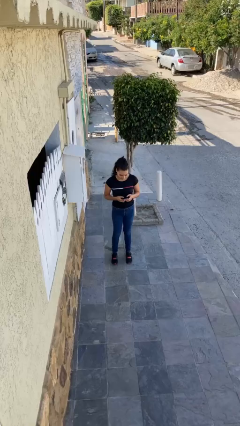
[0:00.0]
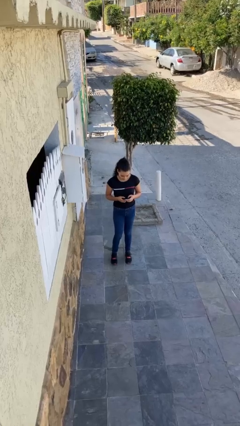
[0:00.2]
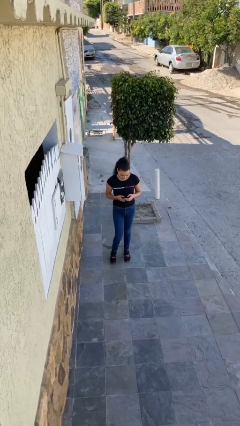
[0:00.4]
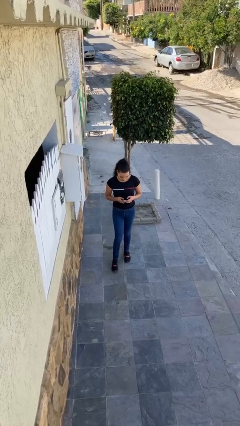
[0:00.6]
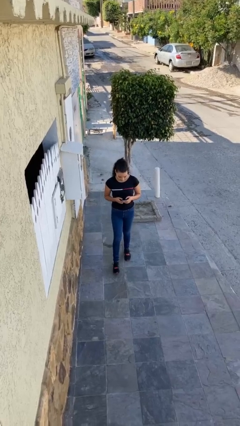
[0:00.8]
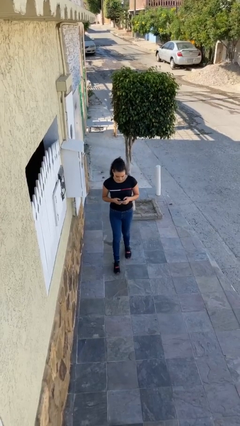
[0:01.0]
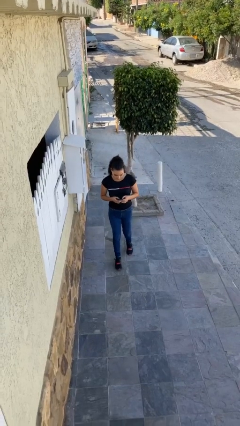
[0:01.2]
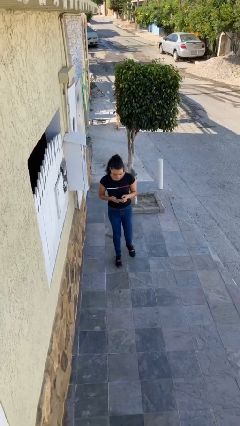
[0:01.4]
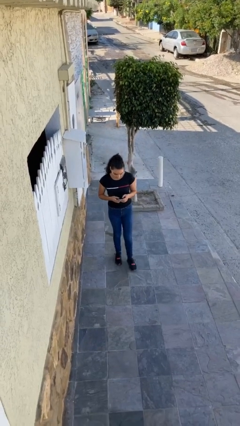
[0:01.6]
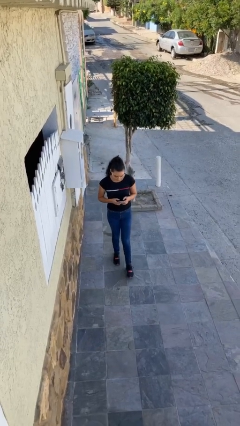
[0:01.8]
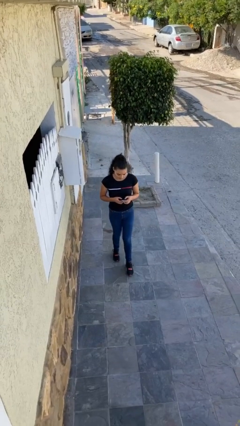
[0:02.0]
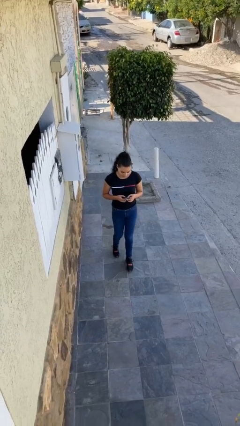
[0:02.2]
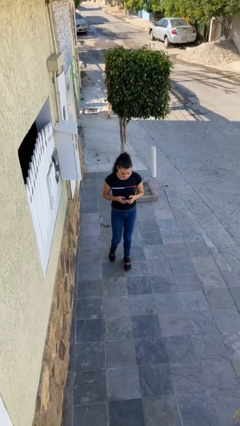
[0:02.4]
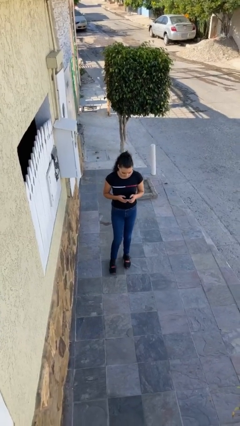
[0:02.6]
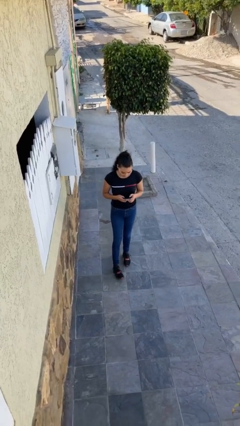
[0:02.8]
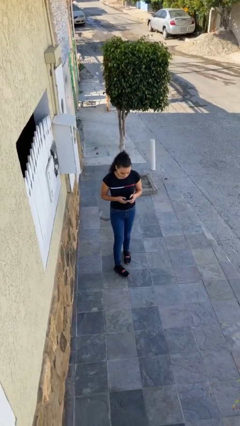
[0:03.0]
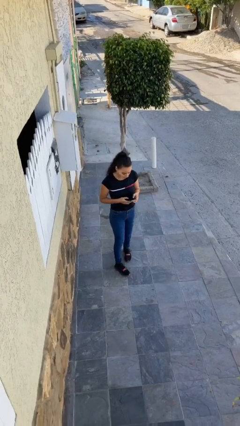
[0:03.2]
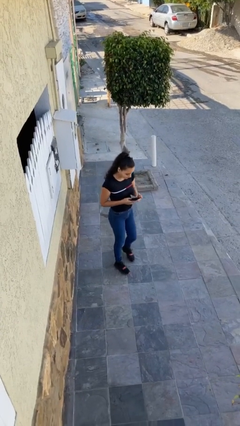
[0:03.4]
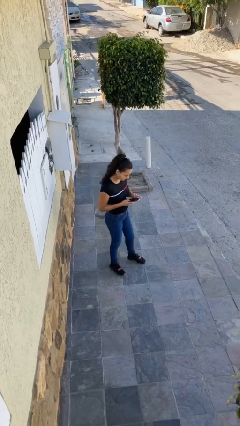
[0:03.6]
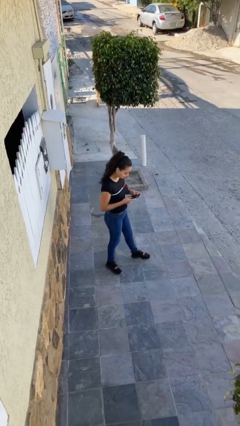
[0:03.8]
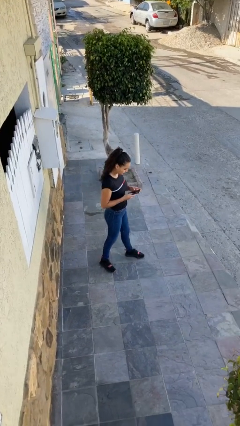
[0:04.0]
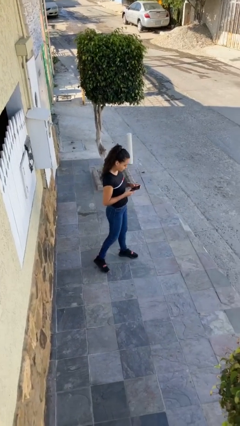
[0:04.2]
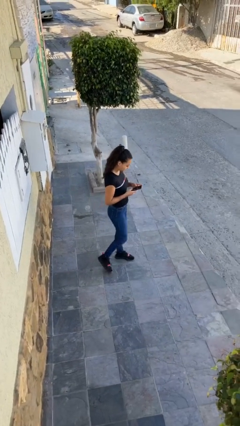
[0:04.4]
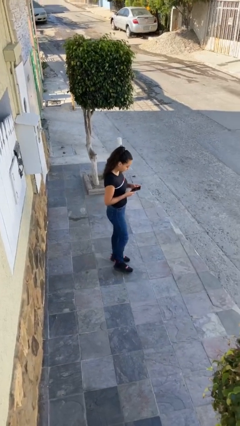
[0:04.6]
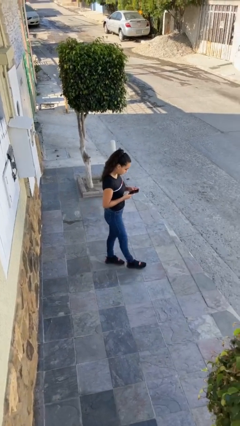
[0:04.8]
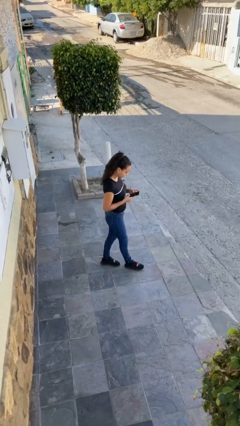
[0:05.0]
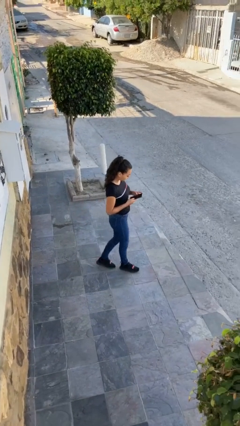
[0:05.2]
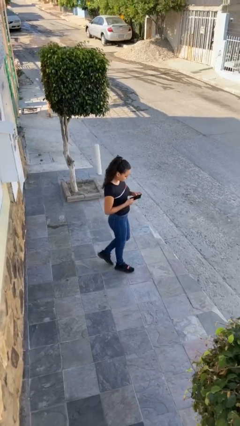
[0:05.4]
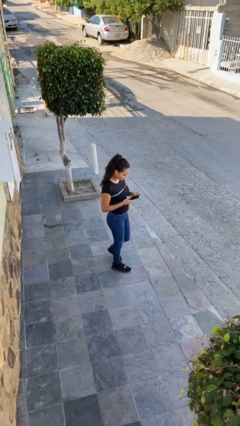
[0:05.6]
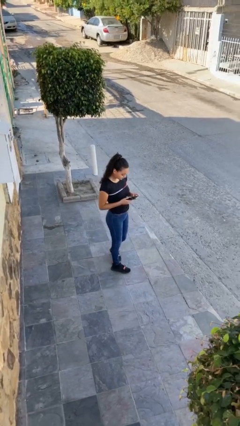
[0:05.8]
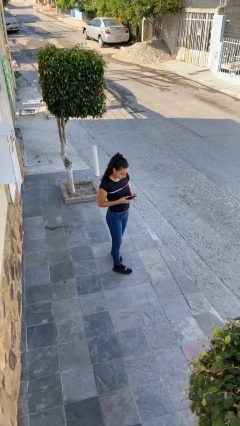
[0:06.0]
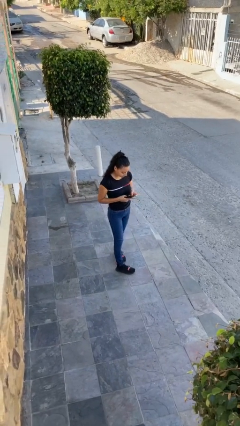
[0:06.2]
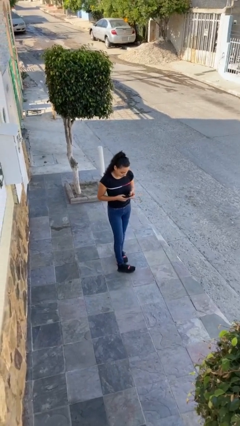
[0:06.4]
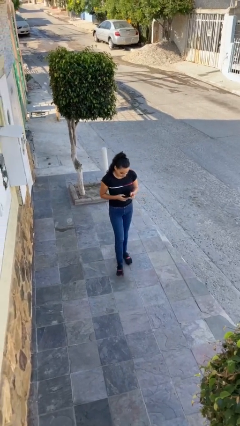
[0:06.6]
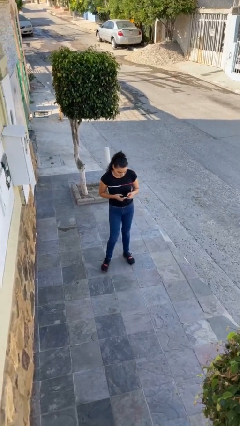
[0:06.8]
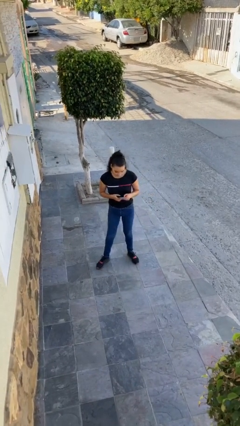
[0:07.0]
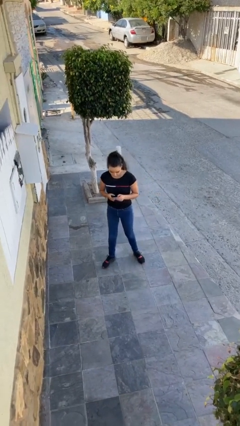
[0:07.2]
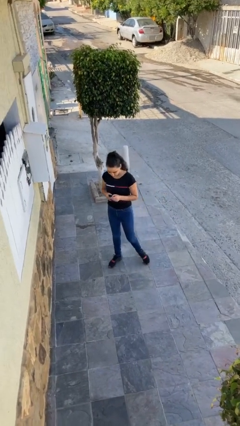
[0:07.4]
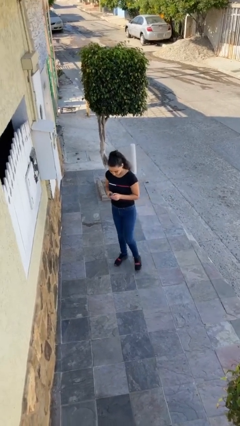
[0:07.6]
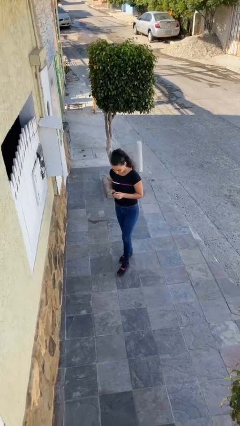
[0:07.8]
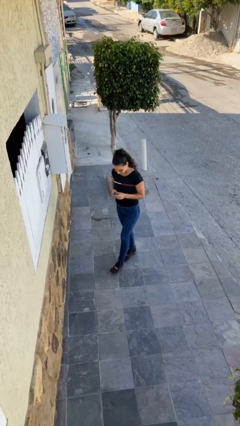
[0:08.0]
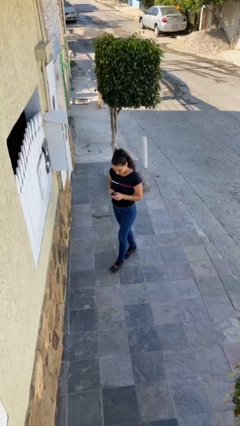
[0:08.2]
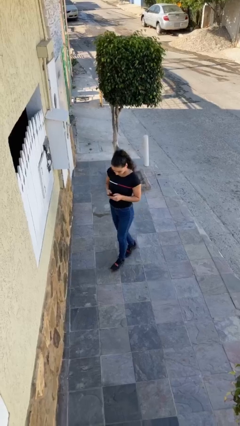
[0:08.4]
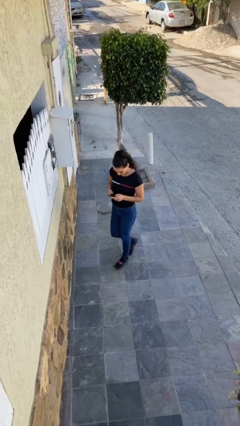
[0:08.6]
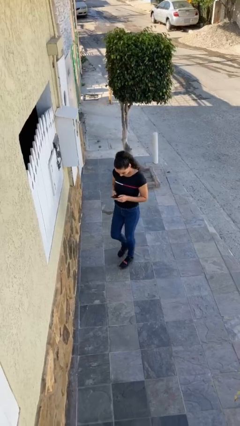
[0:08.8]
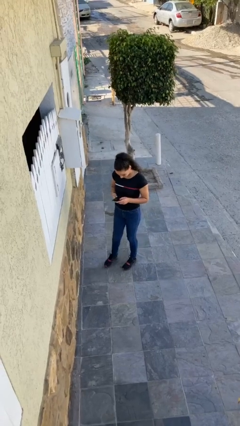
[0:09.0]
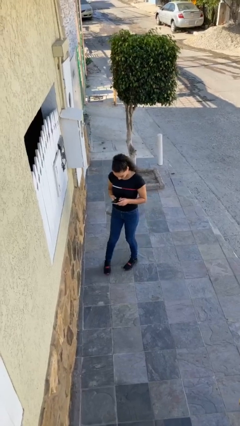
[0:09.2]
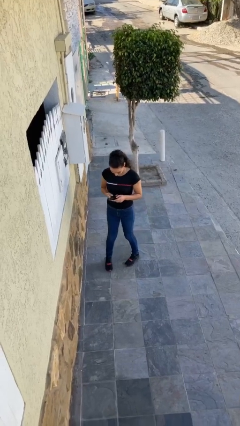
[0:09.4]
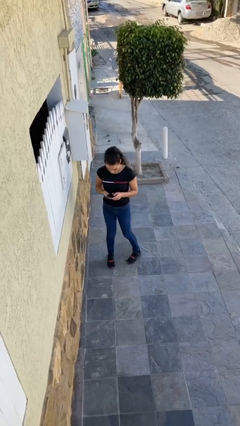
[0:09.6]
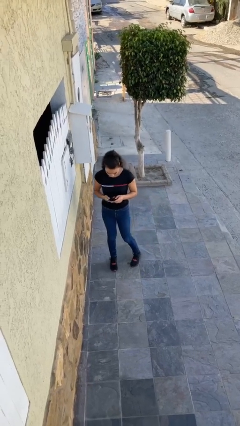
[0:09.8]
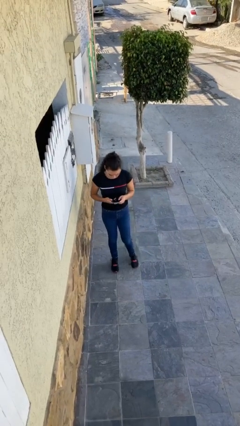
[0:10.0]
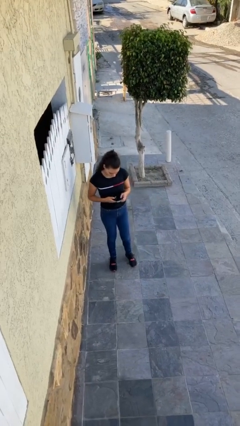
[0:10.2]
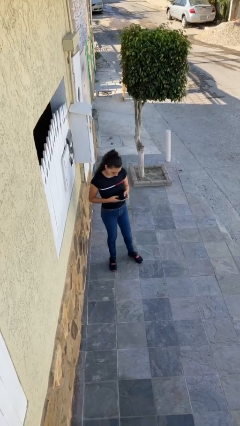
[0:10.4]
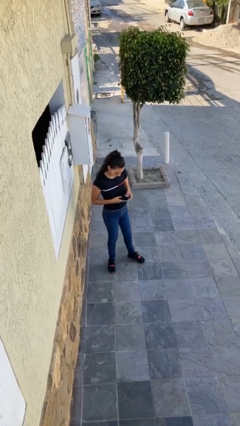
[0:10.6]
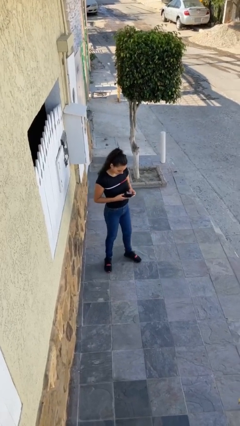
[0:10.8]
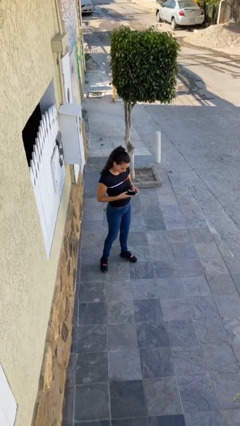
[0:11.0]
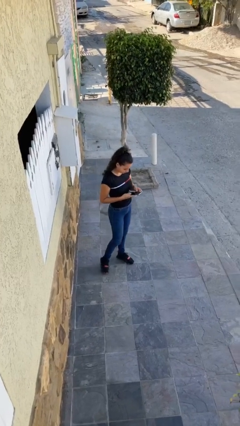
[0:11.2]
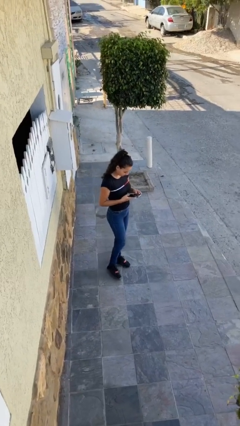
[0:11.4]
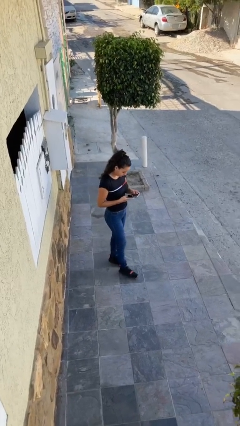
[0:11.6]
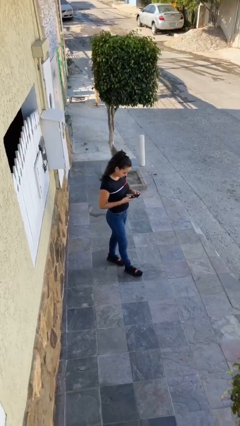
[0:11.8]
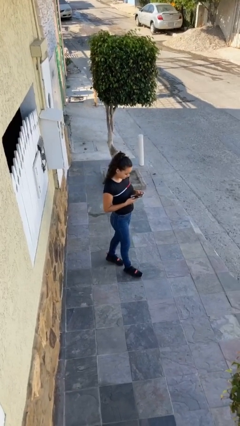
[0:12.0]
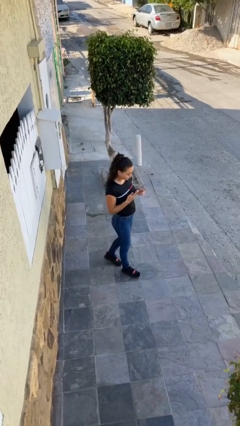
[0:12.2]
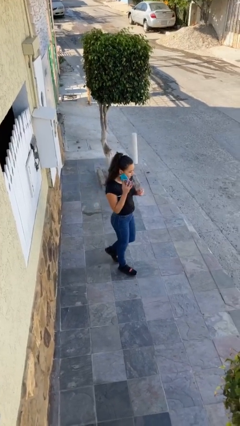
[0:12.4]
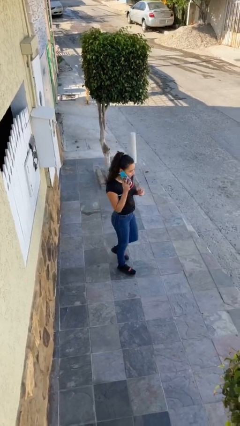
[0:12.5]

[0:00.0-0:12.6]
person texts on phone

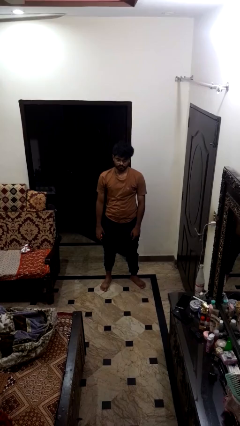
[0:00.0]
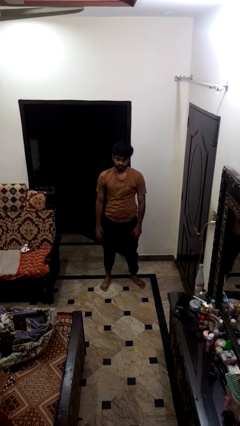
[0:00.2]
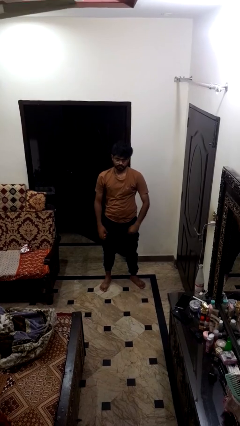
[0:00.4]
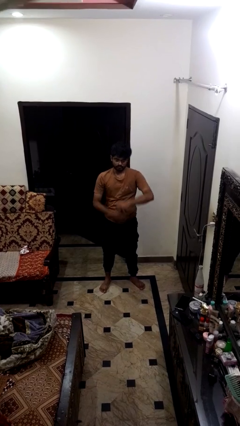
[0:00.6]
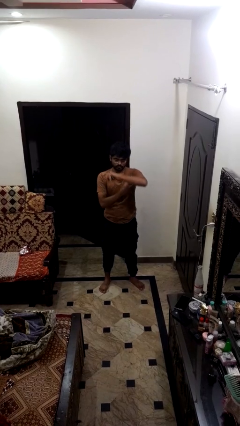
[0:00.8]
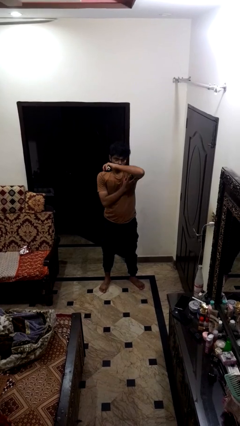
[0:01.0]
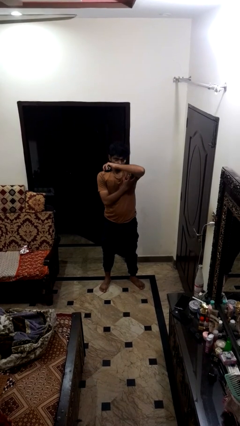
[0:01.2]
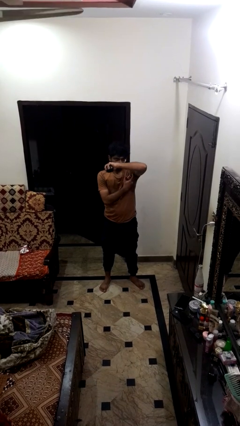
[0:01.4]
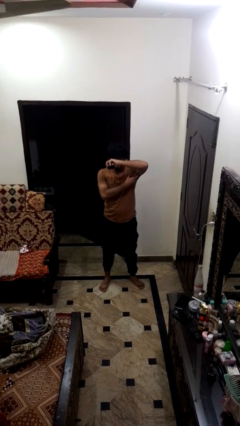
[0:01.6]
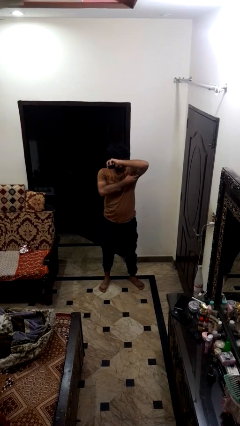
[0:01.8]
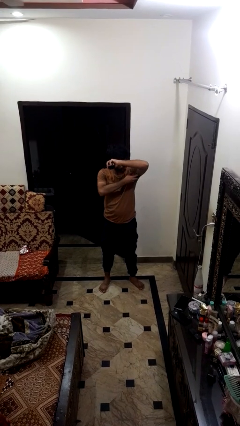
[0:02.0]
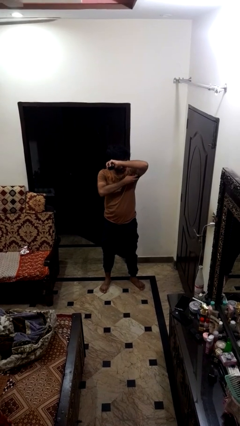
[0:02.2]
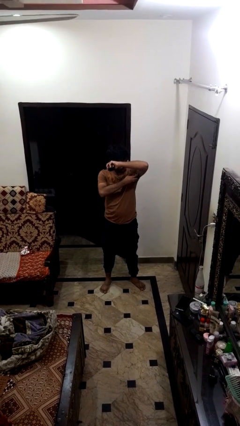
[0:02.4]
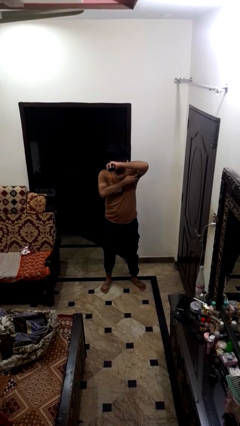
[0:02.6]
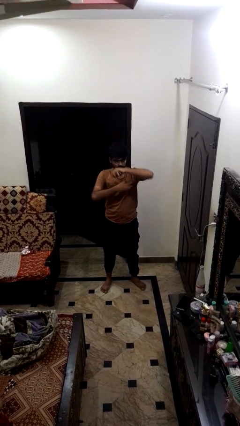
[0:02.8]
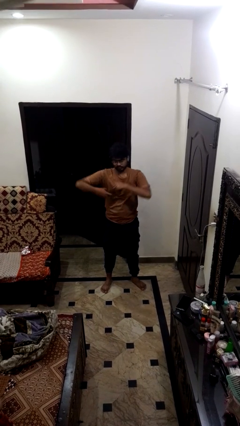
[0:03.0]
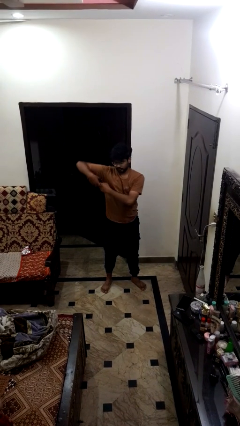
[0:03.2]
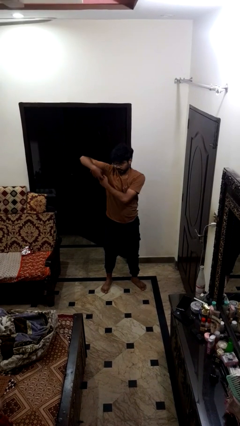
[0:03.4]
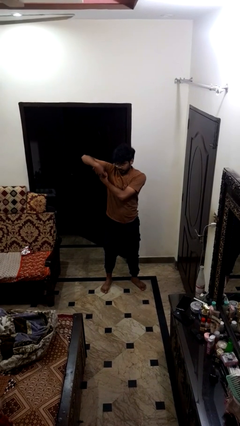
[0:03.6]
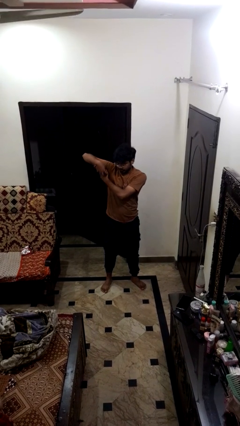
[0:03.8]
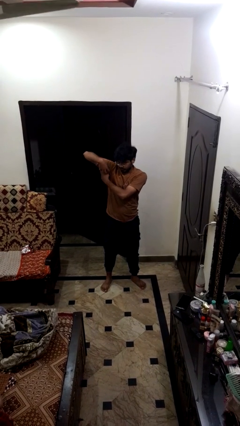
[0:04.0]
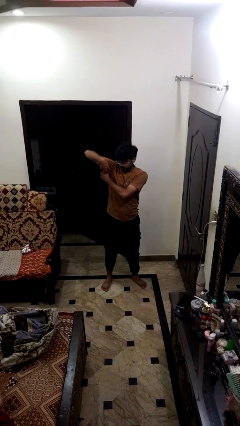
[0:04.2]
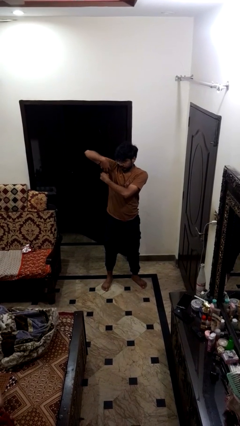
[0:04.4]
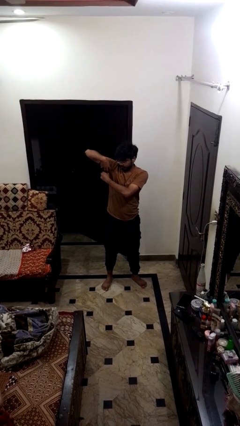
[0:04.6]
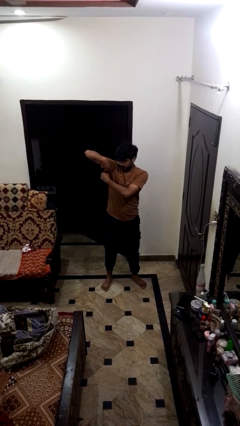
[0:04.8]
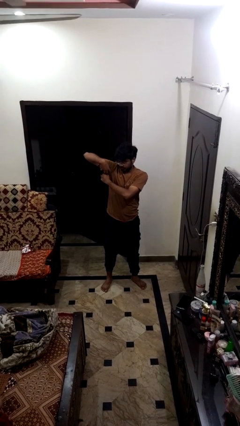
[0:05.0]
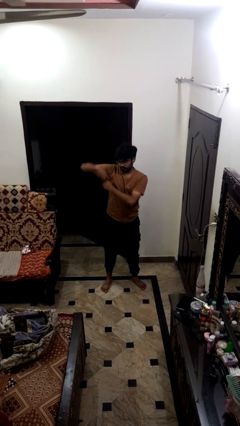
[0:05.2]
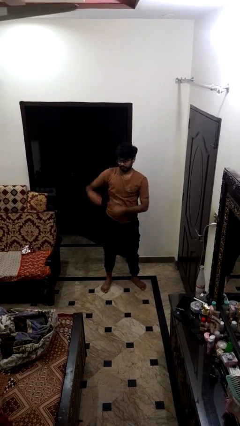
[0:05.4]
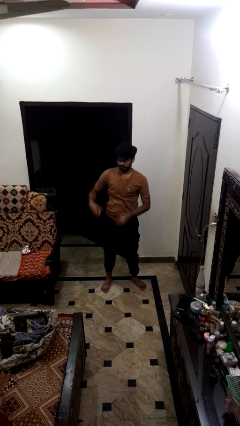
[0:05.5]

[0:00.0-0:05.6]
person applies deodorant
